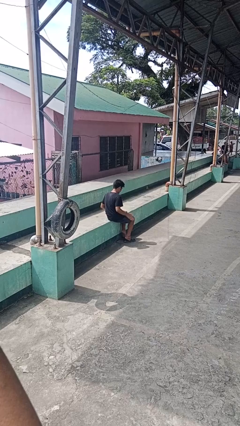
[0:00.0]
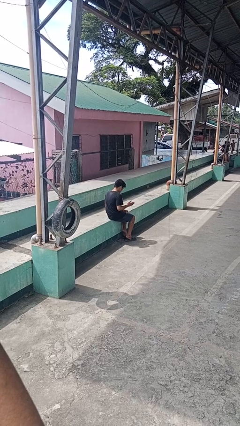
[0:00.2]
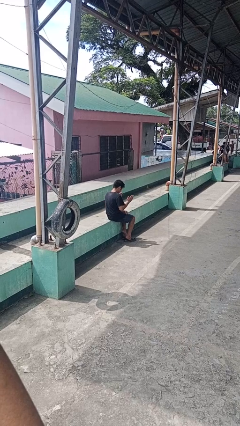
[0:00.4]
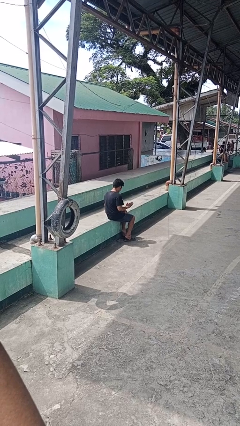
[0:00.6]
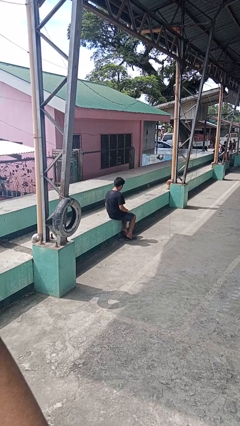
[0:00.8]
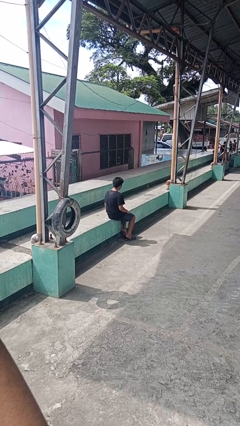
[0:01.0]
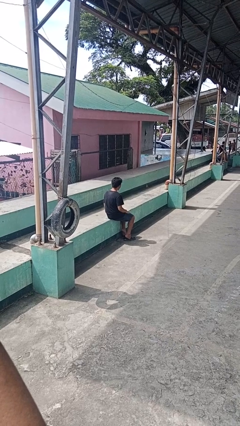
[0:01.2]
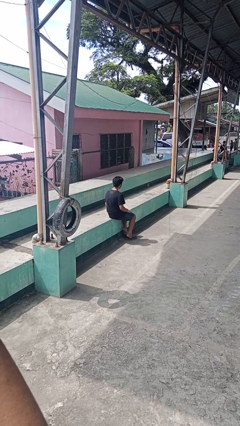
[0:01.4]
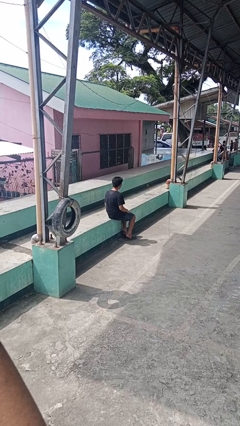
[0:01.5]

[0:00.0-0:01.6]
person slaps hands on thighs

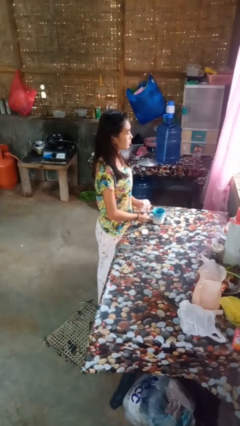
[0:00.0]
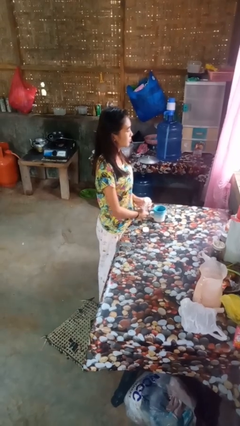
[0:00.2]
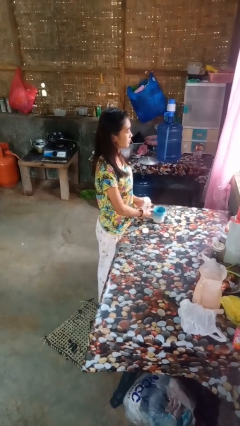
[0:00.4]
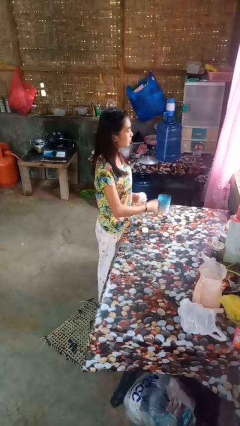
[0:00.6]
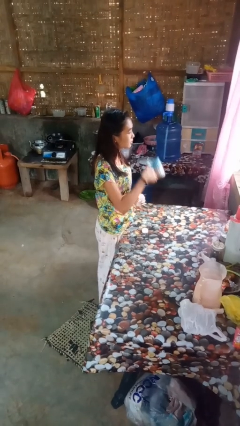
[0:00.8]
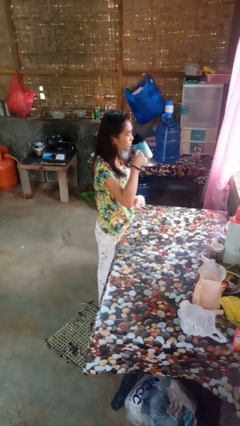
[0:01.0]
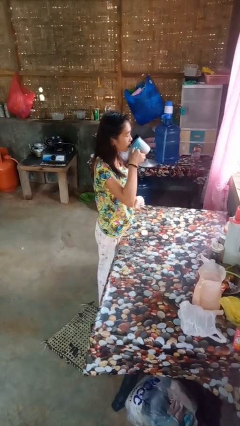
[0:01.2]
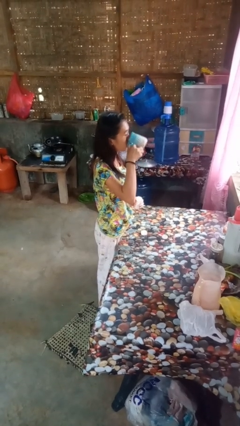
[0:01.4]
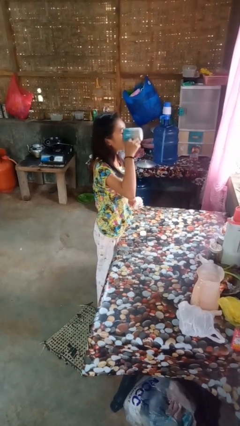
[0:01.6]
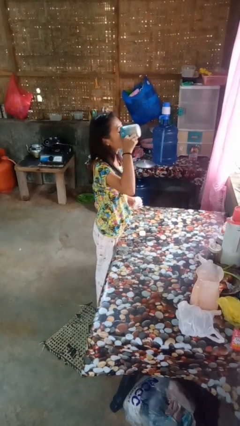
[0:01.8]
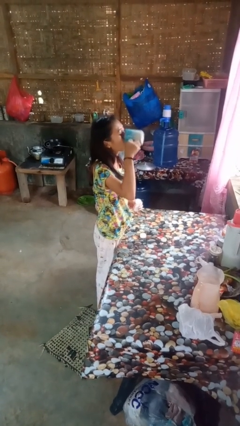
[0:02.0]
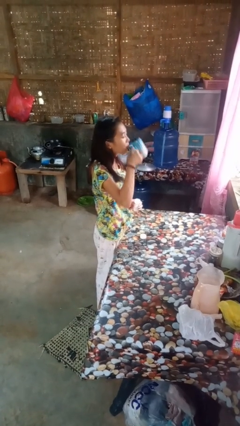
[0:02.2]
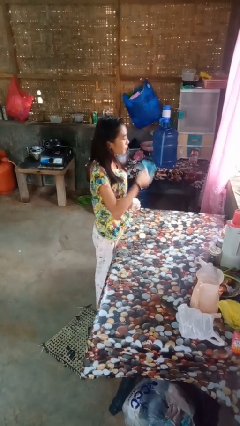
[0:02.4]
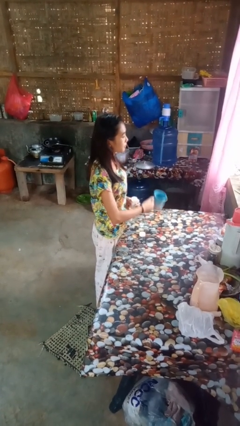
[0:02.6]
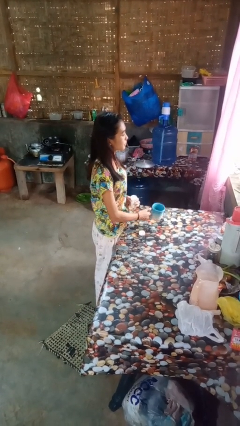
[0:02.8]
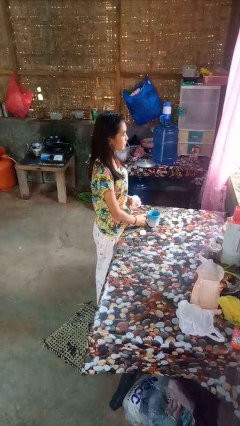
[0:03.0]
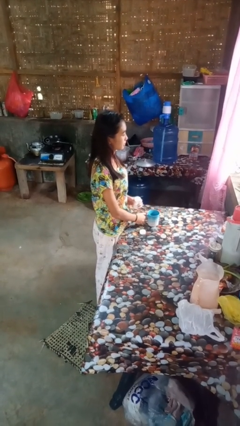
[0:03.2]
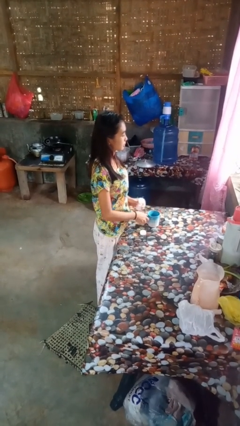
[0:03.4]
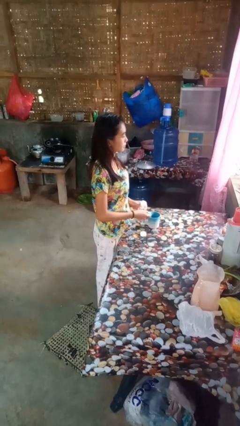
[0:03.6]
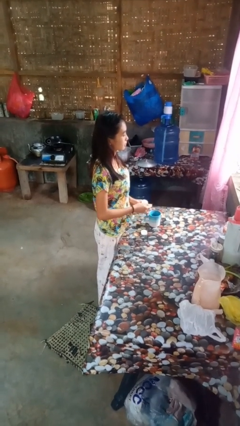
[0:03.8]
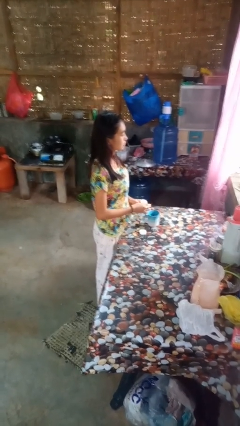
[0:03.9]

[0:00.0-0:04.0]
person drinks from cup

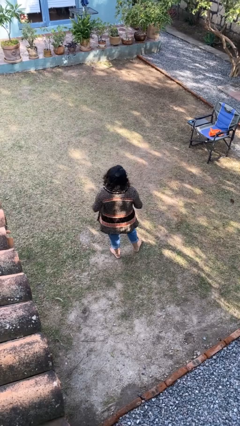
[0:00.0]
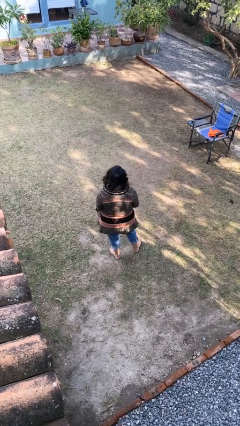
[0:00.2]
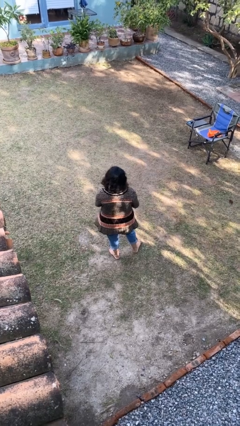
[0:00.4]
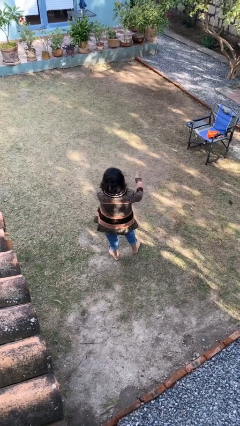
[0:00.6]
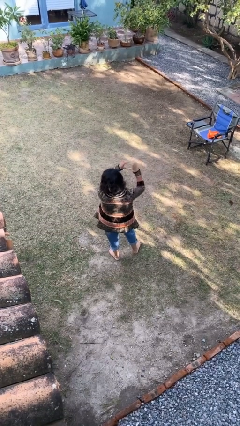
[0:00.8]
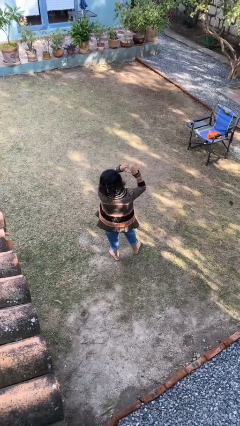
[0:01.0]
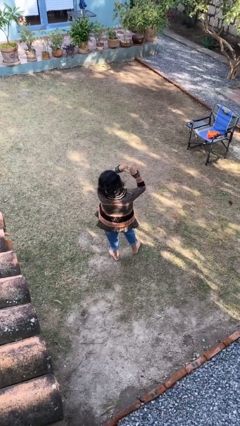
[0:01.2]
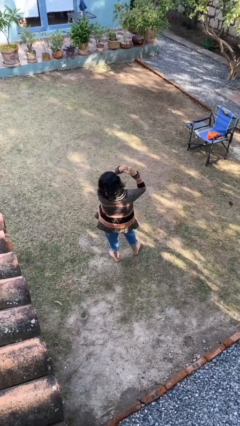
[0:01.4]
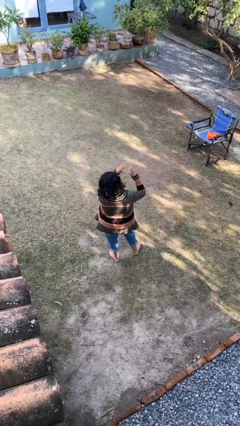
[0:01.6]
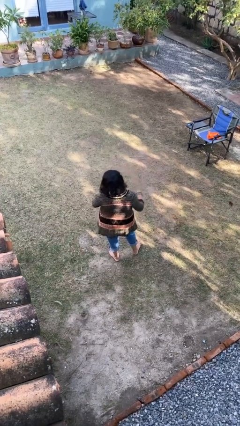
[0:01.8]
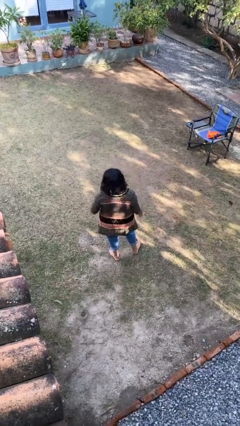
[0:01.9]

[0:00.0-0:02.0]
person gestures heart

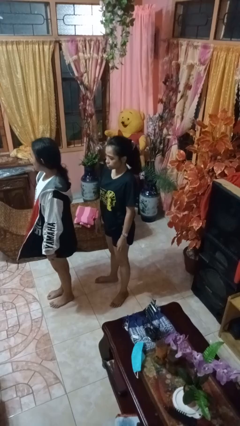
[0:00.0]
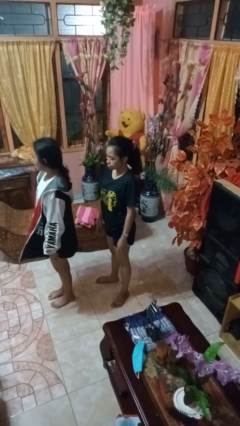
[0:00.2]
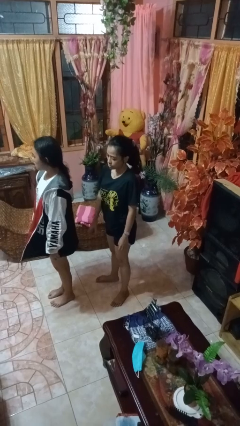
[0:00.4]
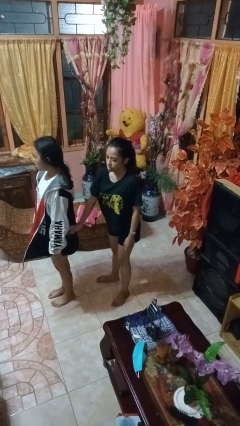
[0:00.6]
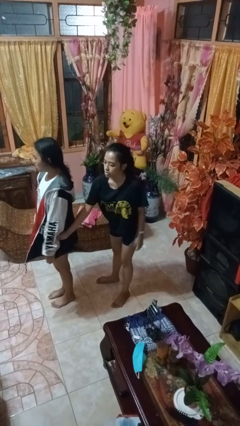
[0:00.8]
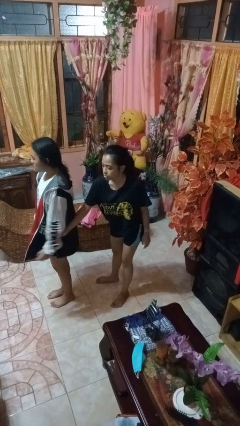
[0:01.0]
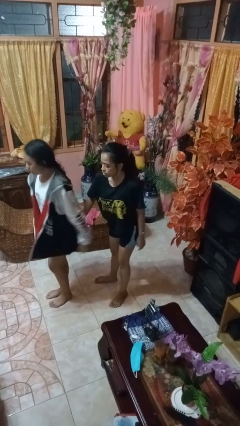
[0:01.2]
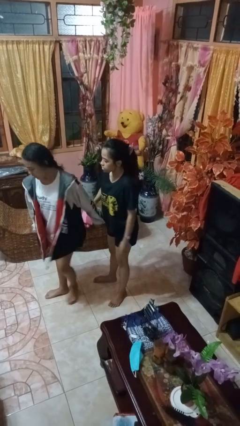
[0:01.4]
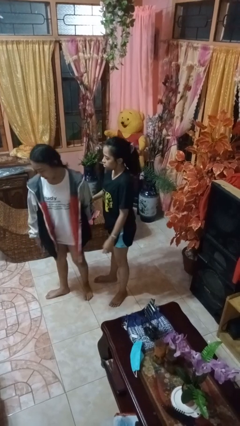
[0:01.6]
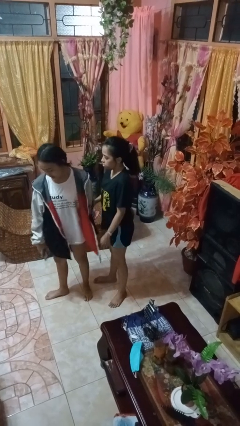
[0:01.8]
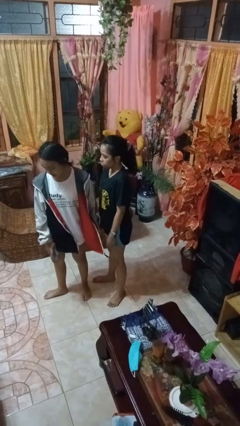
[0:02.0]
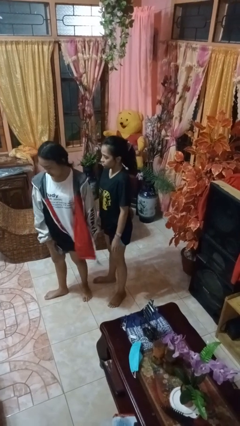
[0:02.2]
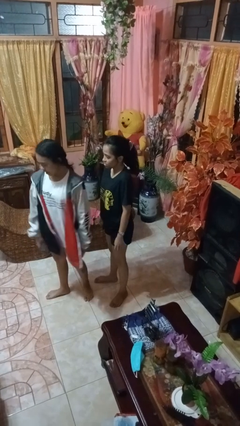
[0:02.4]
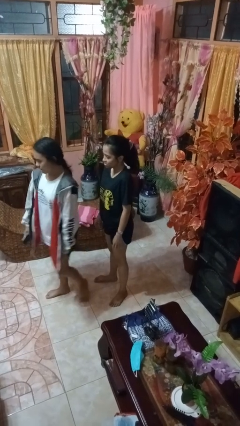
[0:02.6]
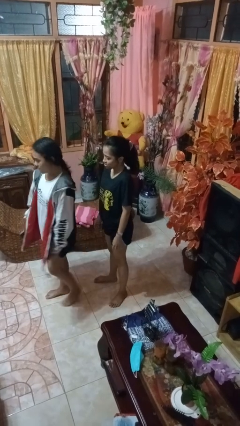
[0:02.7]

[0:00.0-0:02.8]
person grabs person by forearm

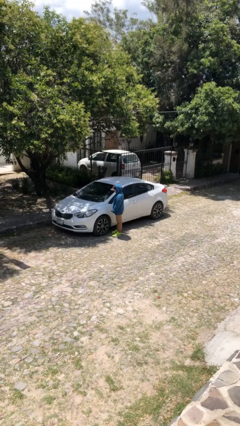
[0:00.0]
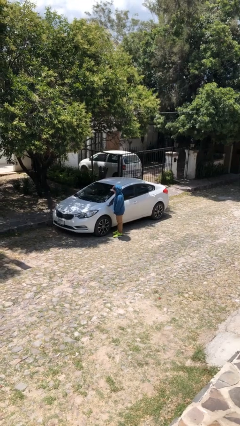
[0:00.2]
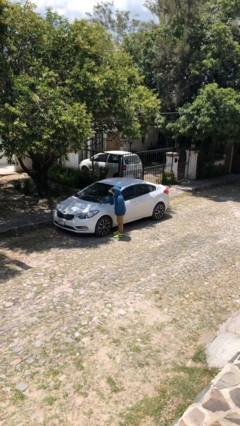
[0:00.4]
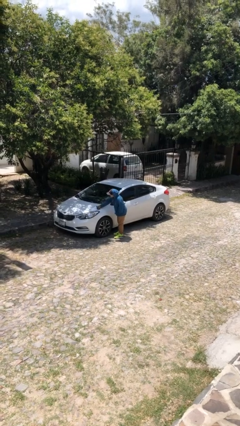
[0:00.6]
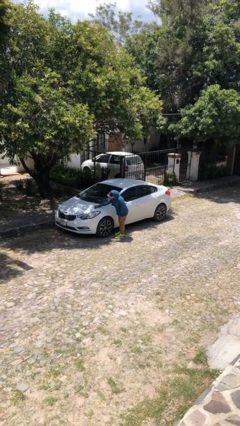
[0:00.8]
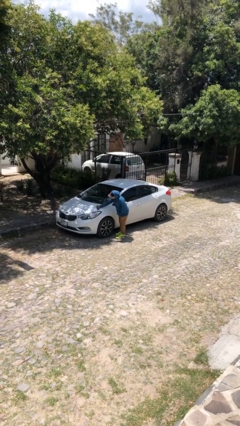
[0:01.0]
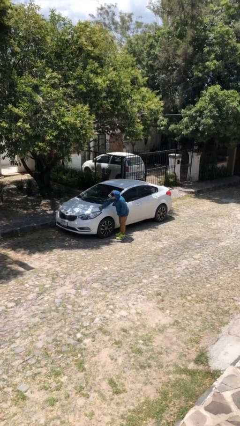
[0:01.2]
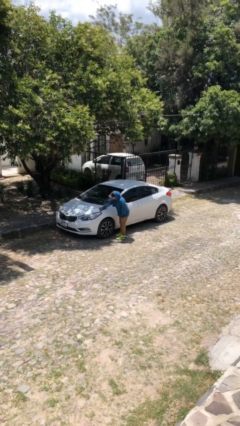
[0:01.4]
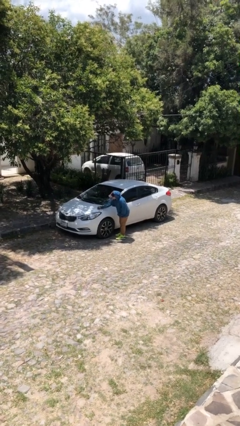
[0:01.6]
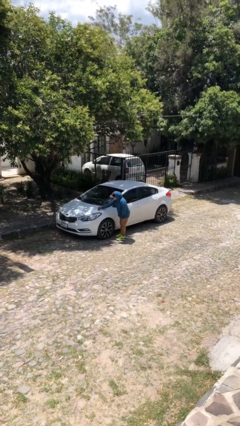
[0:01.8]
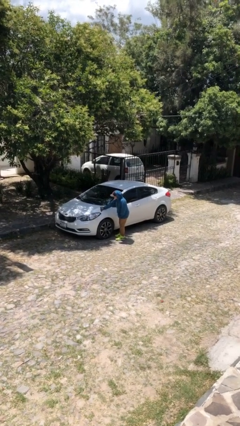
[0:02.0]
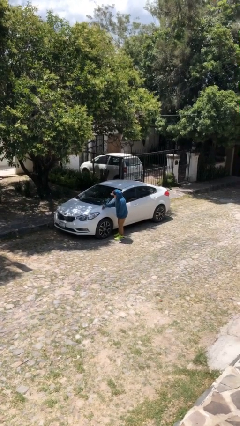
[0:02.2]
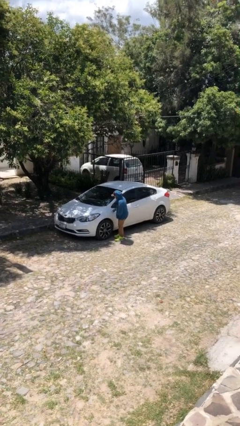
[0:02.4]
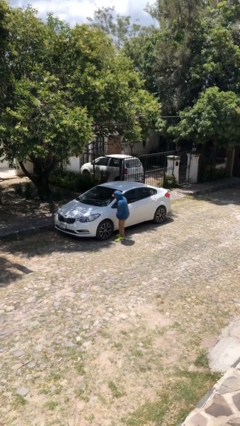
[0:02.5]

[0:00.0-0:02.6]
person polishes car with rag

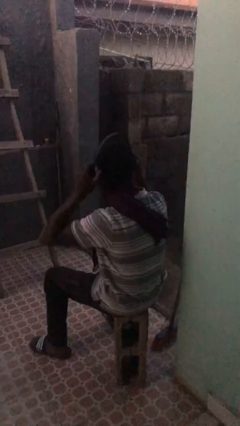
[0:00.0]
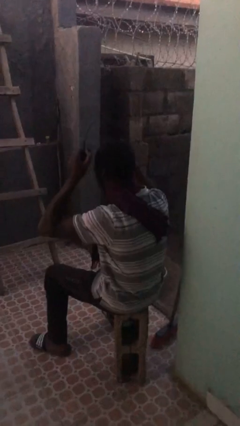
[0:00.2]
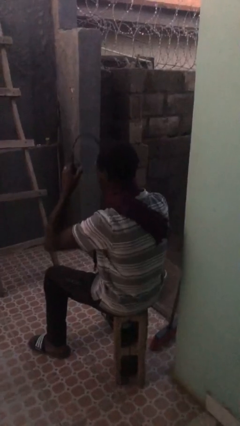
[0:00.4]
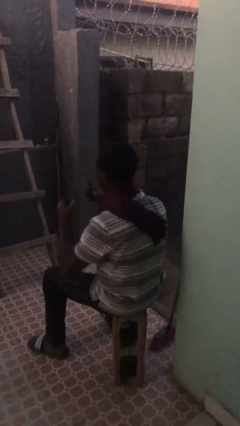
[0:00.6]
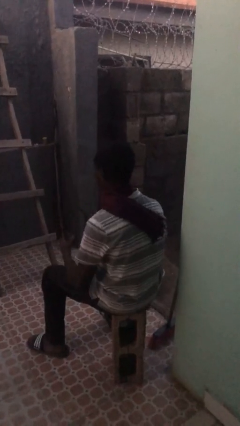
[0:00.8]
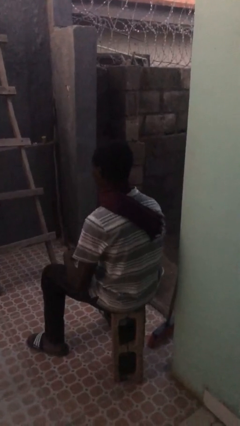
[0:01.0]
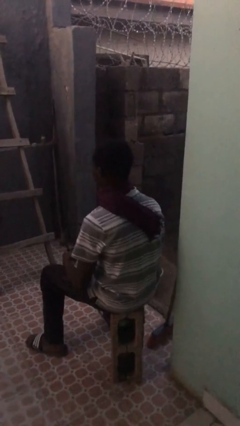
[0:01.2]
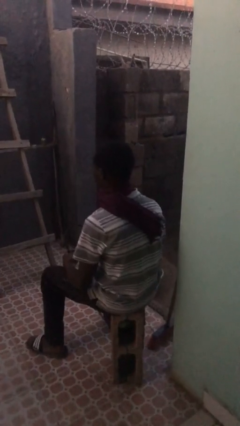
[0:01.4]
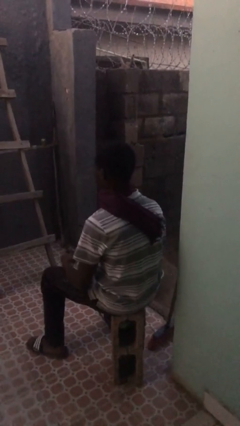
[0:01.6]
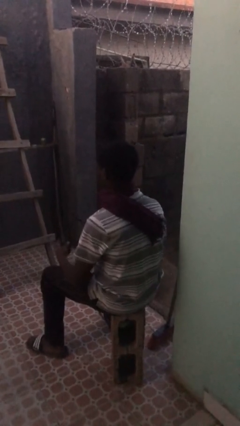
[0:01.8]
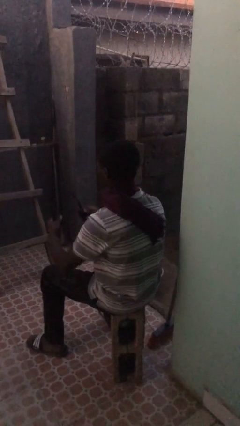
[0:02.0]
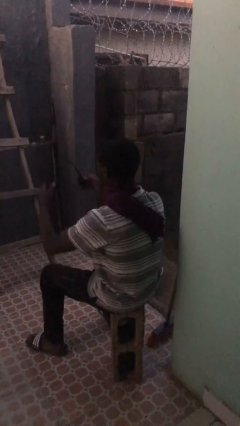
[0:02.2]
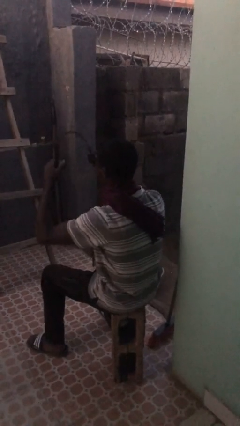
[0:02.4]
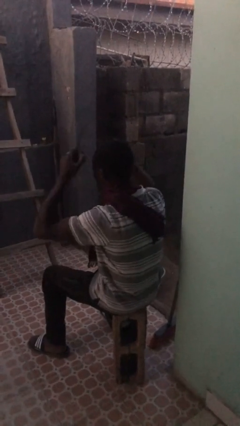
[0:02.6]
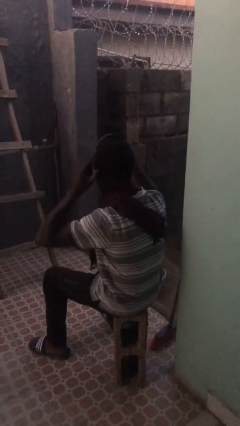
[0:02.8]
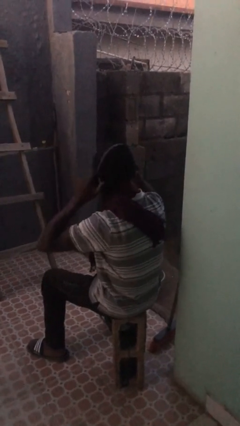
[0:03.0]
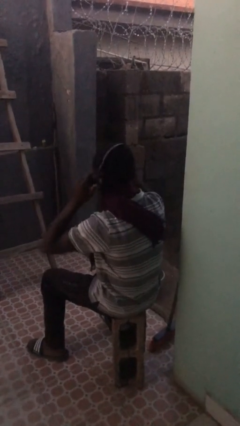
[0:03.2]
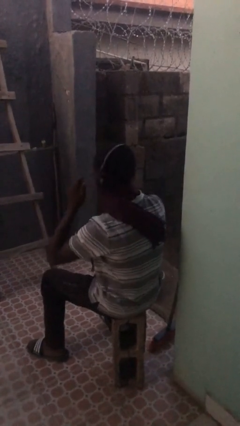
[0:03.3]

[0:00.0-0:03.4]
person takes off headphones

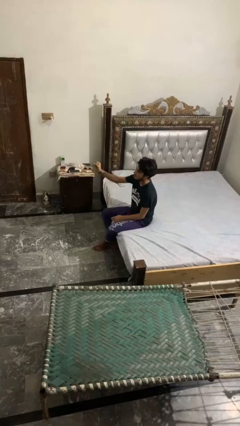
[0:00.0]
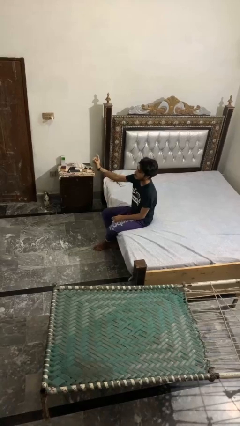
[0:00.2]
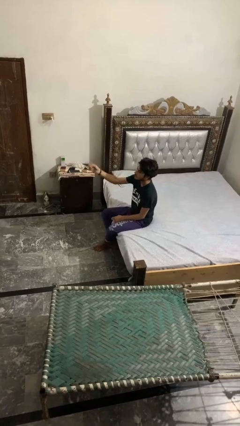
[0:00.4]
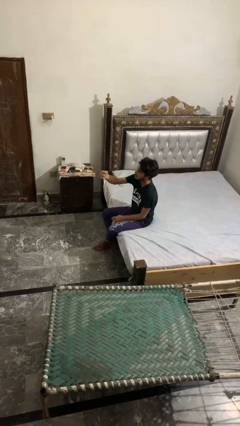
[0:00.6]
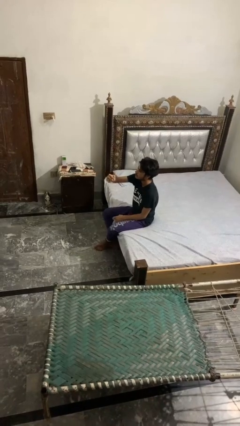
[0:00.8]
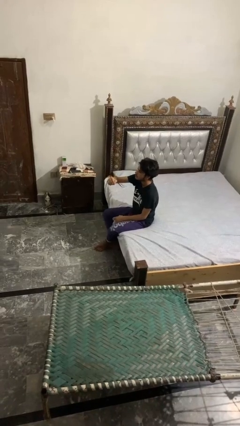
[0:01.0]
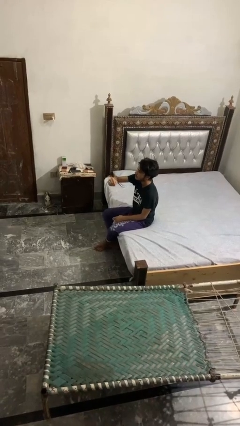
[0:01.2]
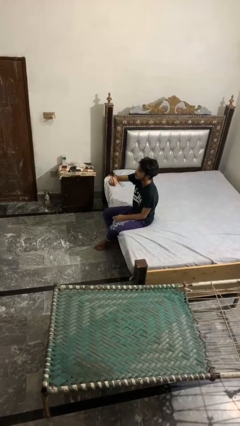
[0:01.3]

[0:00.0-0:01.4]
person gestures swipe left
